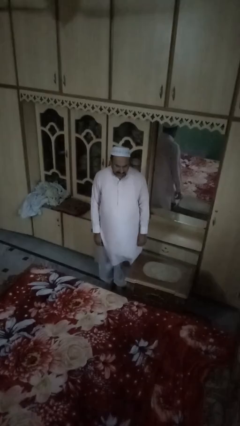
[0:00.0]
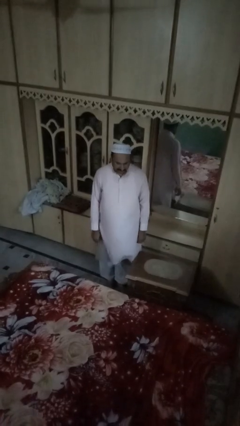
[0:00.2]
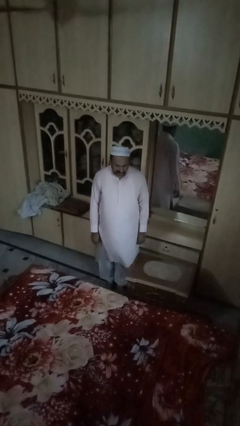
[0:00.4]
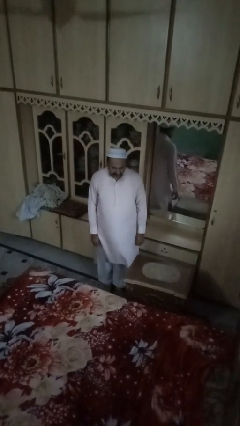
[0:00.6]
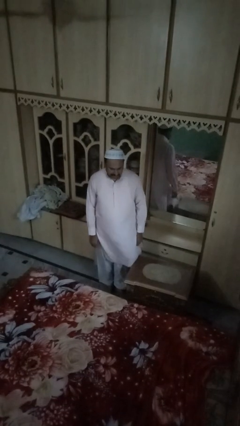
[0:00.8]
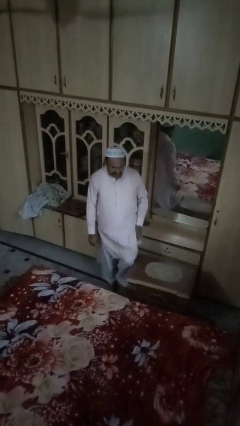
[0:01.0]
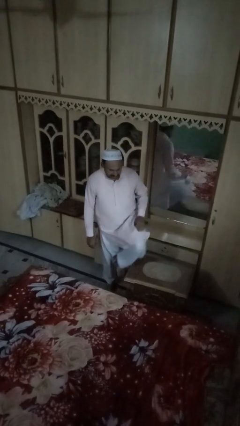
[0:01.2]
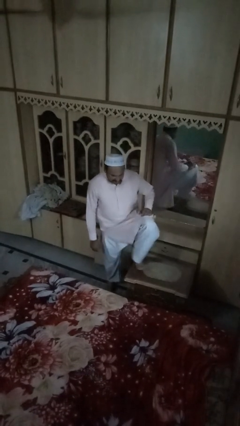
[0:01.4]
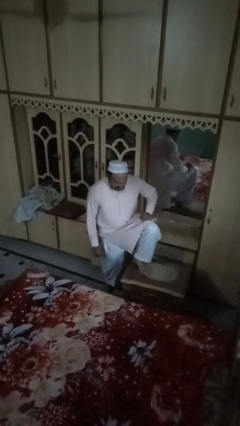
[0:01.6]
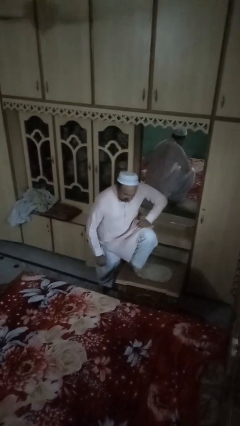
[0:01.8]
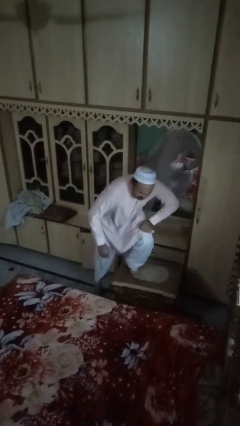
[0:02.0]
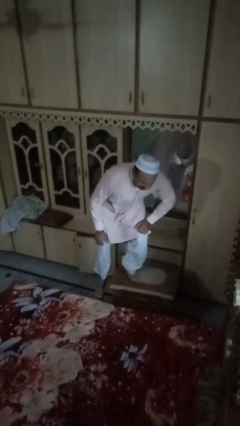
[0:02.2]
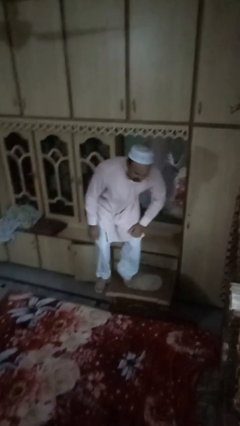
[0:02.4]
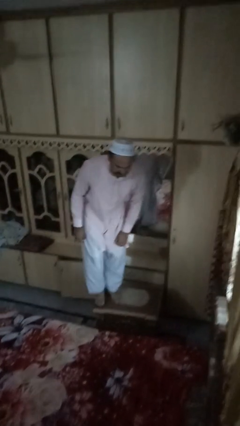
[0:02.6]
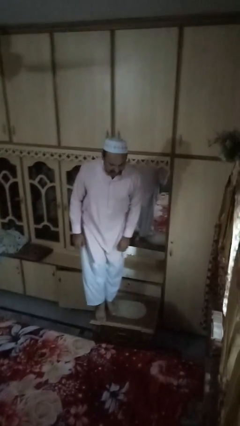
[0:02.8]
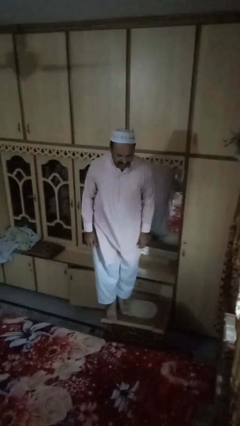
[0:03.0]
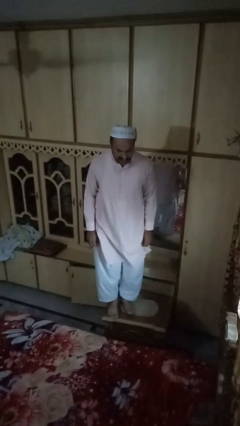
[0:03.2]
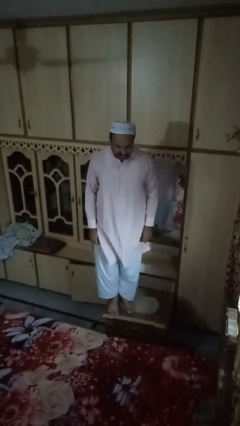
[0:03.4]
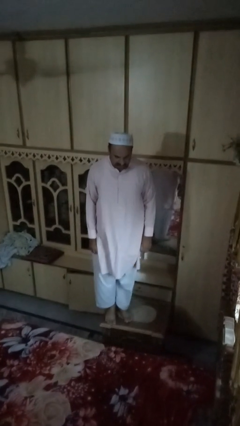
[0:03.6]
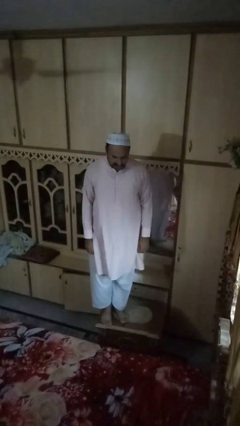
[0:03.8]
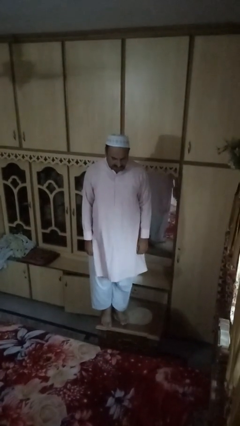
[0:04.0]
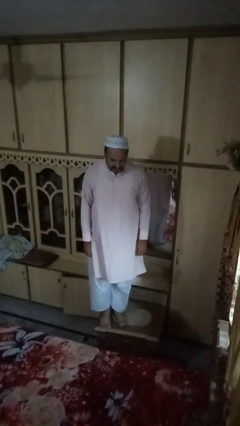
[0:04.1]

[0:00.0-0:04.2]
person climbs on table

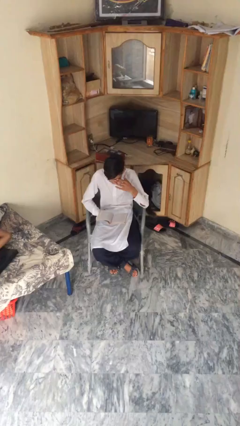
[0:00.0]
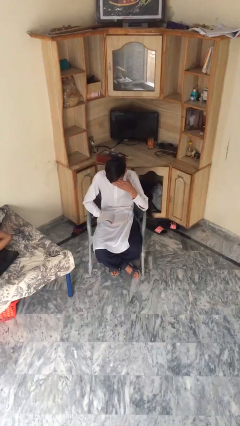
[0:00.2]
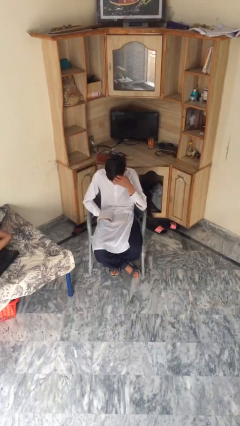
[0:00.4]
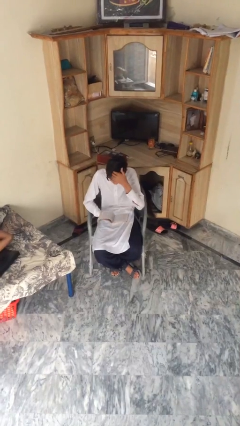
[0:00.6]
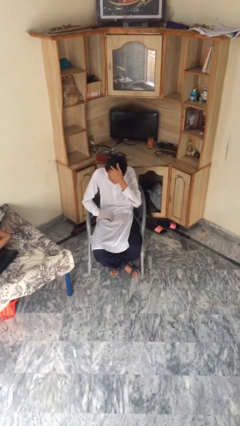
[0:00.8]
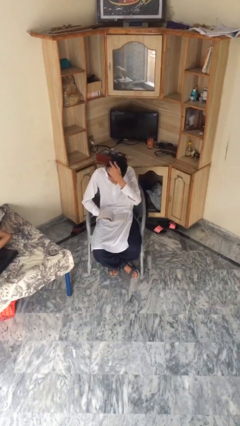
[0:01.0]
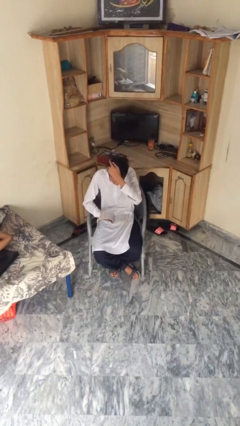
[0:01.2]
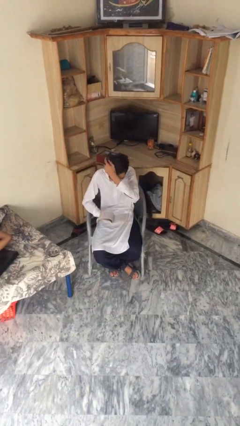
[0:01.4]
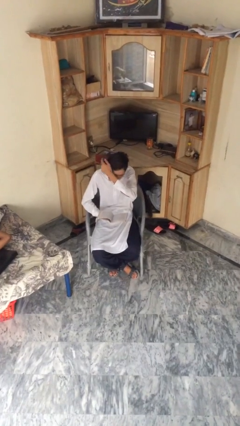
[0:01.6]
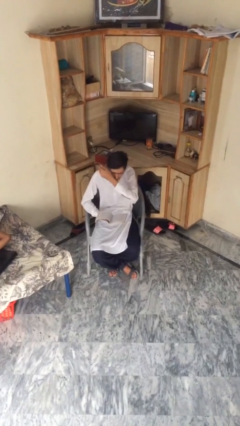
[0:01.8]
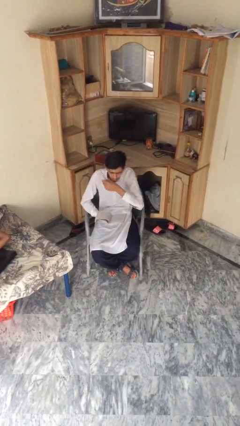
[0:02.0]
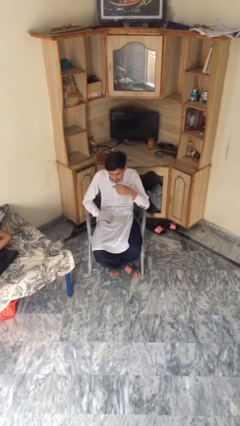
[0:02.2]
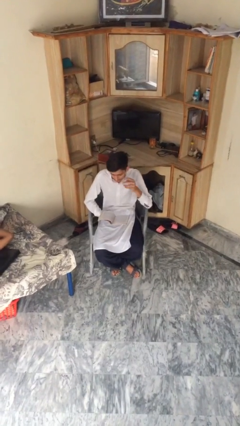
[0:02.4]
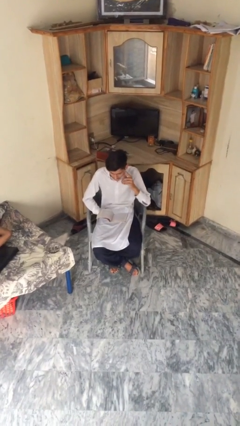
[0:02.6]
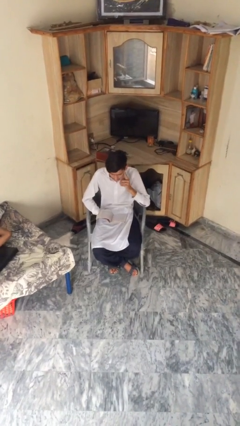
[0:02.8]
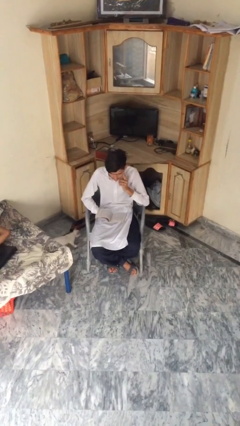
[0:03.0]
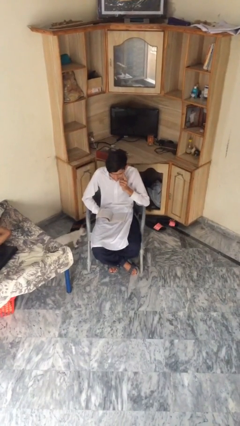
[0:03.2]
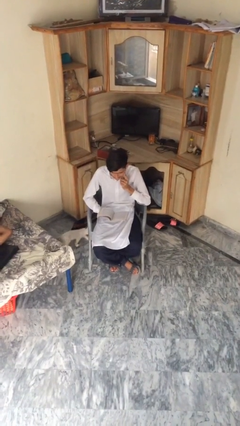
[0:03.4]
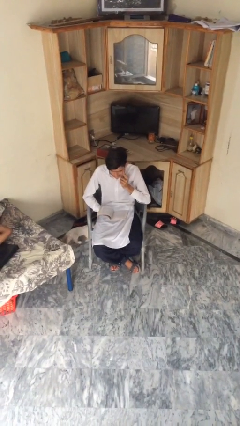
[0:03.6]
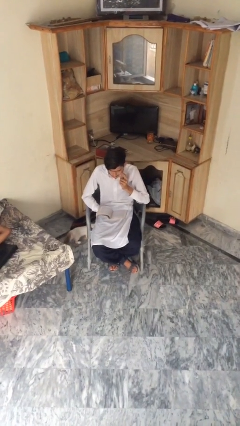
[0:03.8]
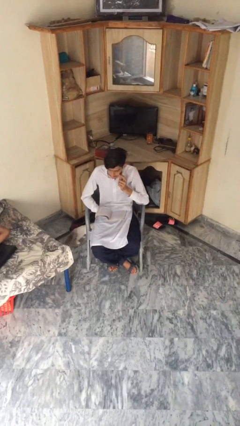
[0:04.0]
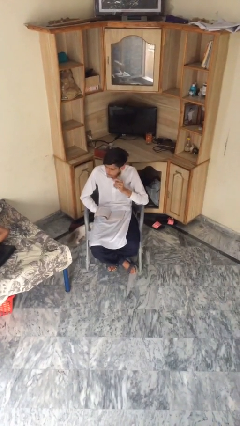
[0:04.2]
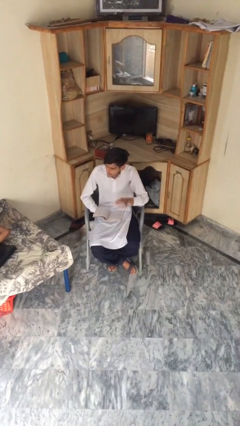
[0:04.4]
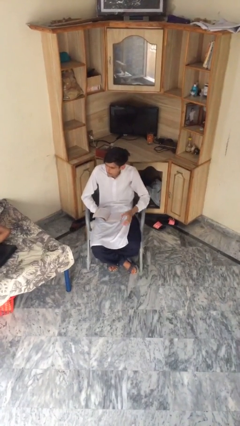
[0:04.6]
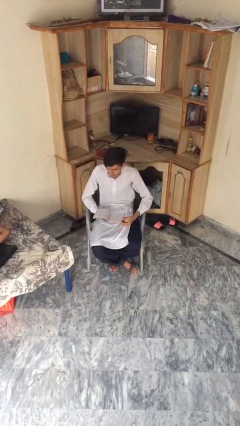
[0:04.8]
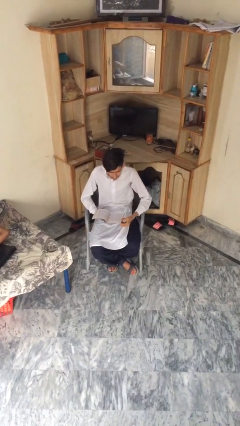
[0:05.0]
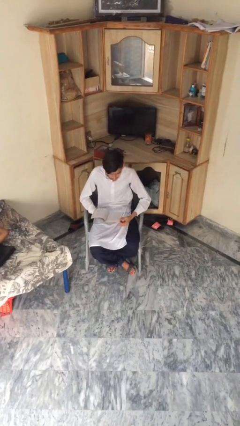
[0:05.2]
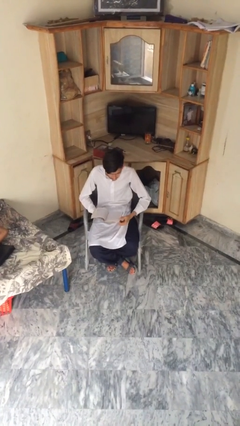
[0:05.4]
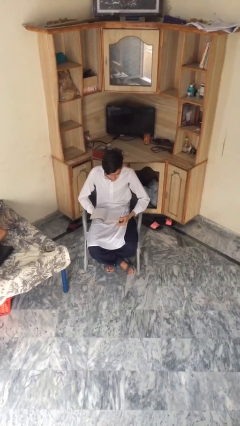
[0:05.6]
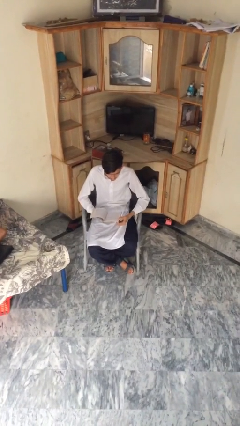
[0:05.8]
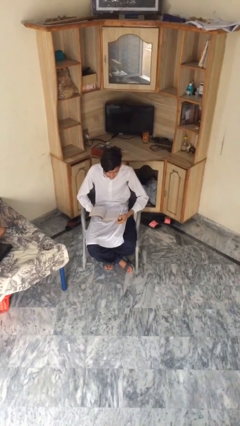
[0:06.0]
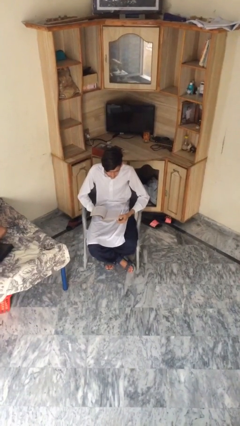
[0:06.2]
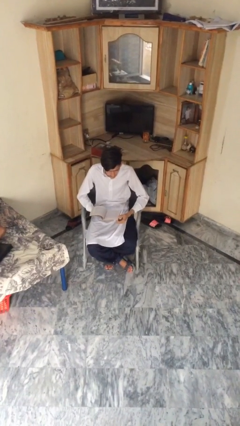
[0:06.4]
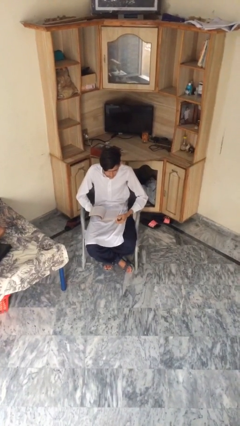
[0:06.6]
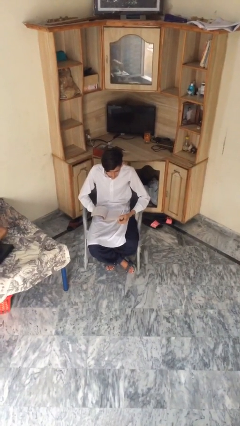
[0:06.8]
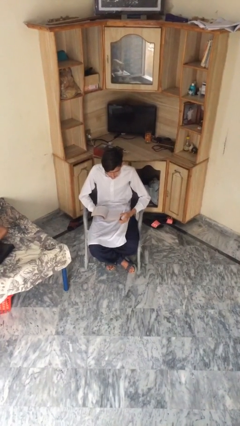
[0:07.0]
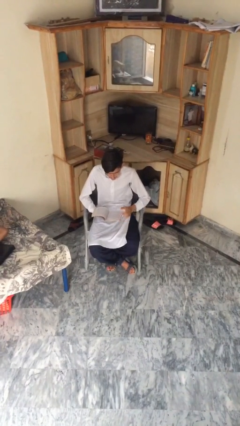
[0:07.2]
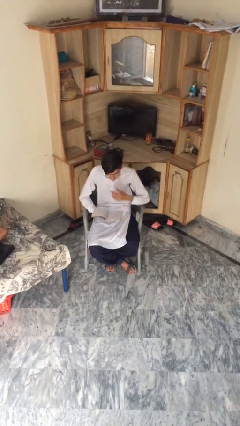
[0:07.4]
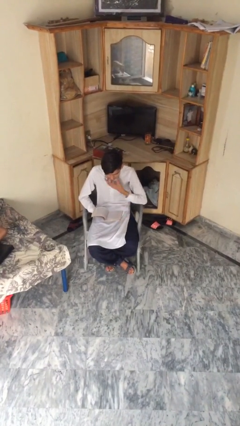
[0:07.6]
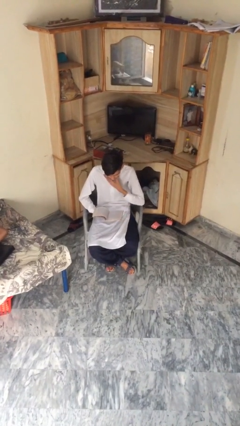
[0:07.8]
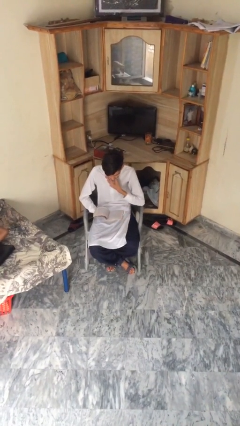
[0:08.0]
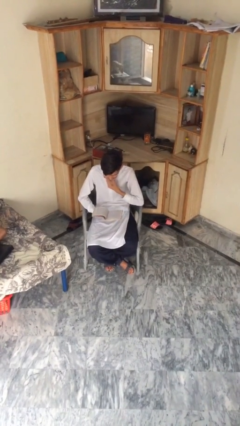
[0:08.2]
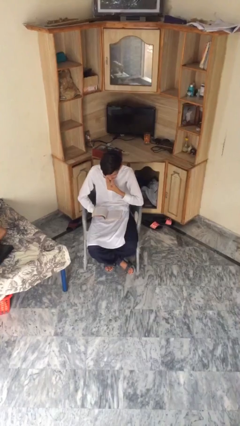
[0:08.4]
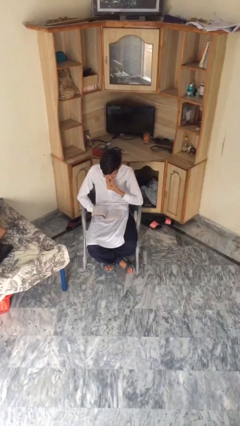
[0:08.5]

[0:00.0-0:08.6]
person reads document

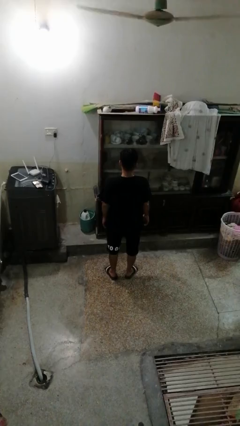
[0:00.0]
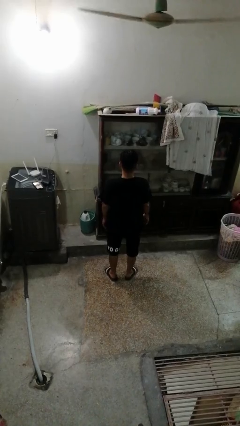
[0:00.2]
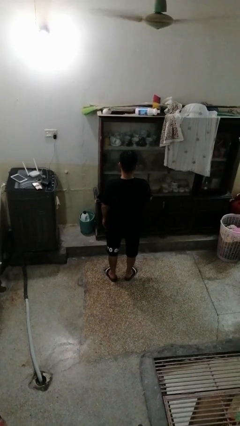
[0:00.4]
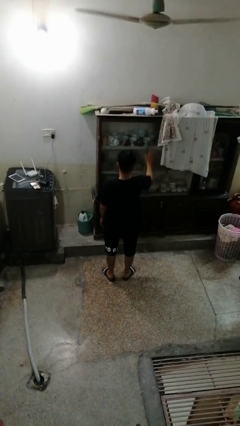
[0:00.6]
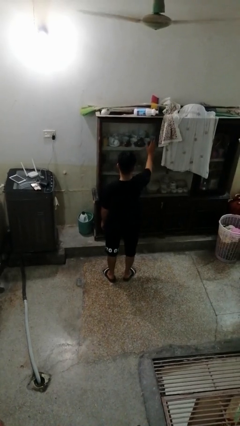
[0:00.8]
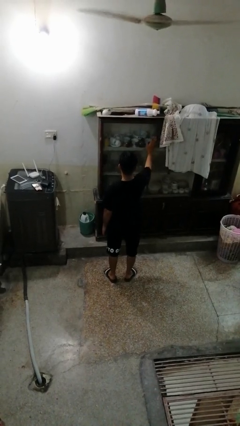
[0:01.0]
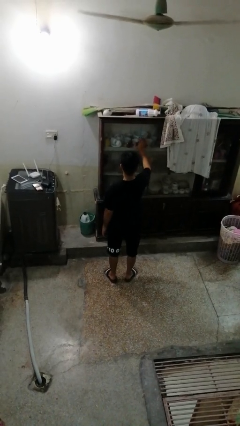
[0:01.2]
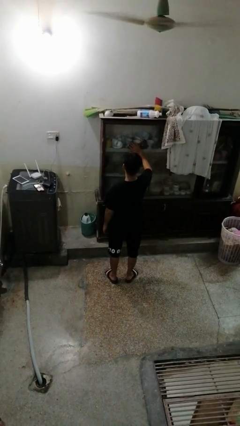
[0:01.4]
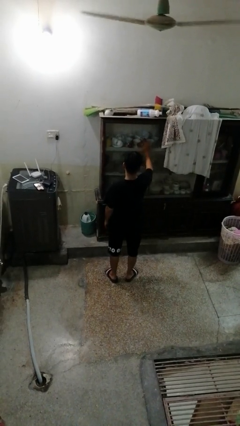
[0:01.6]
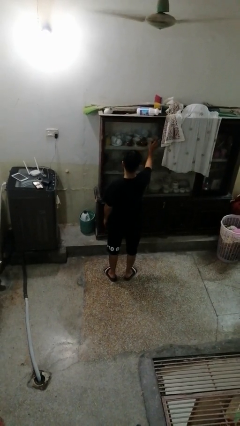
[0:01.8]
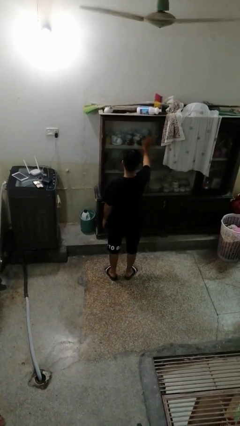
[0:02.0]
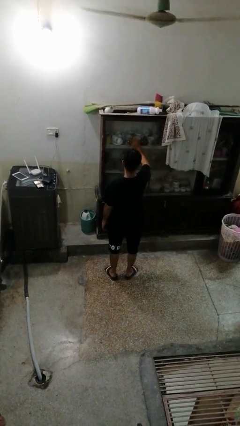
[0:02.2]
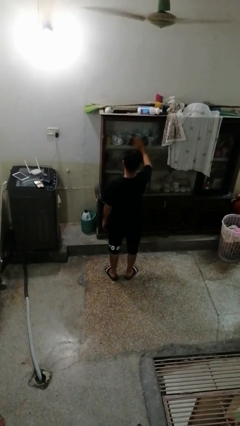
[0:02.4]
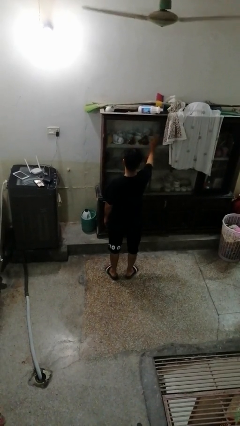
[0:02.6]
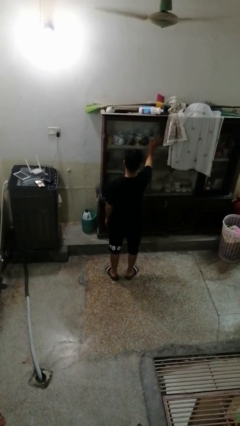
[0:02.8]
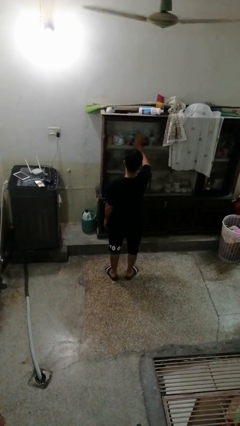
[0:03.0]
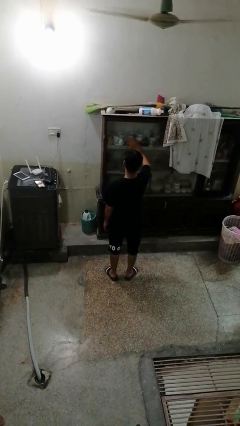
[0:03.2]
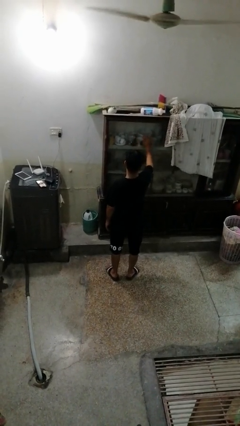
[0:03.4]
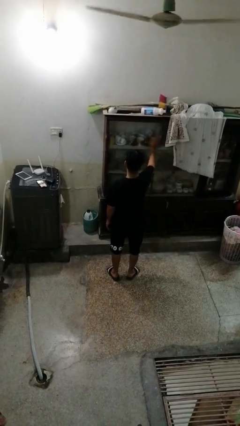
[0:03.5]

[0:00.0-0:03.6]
person waves hand over object

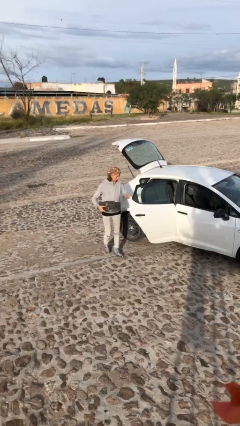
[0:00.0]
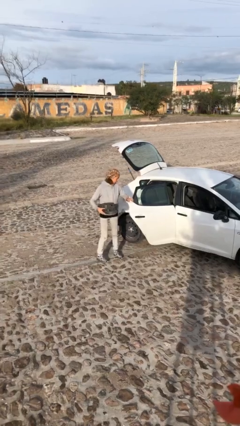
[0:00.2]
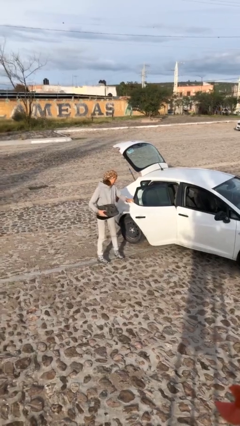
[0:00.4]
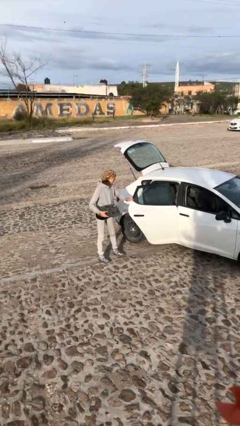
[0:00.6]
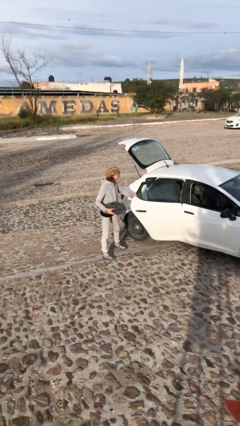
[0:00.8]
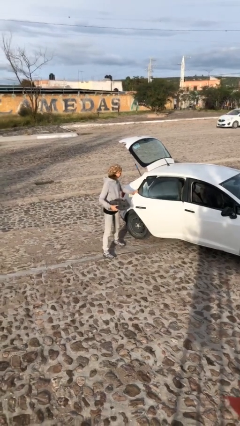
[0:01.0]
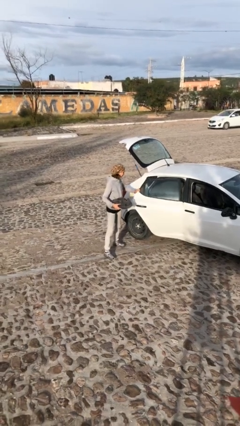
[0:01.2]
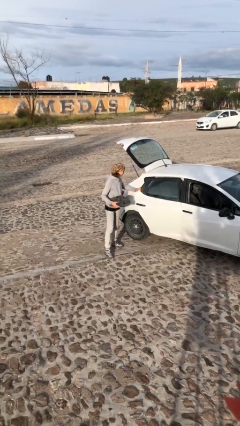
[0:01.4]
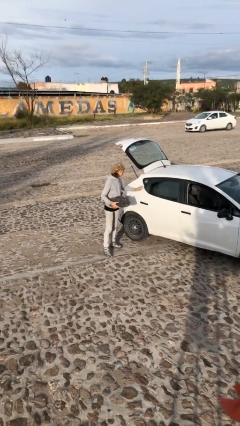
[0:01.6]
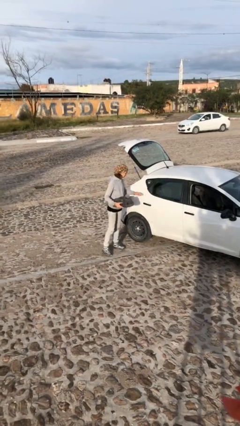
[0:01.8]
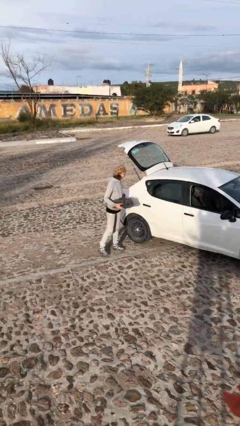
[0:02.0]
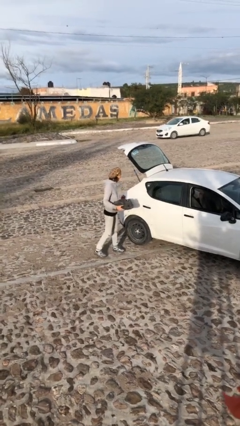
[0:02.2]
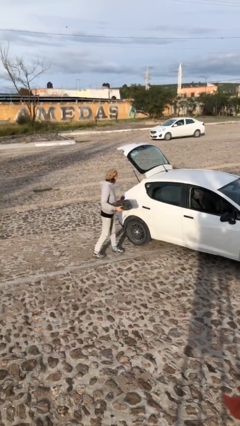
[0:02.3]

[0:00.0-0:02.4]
person closes car door
